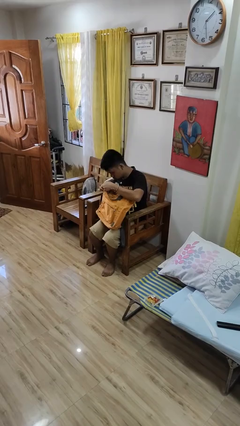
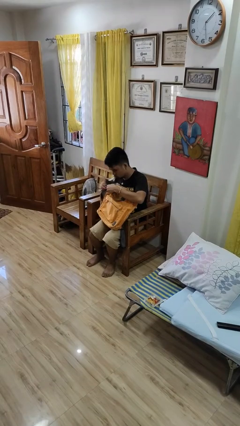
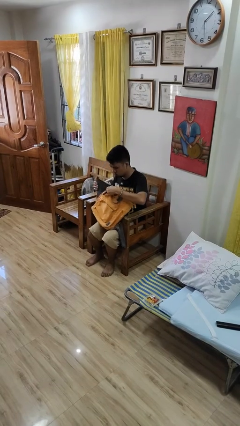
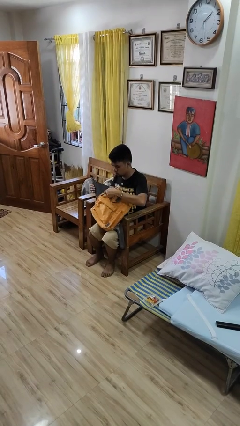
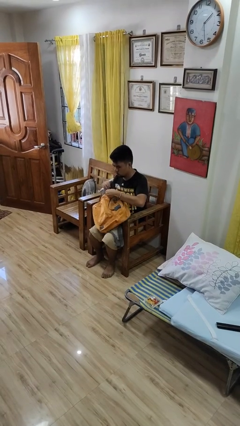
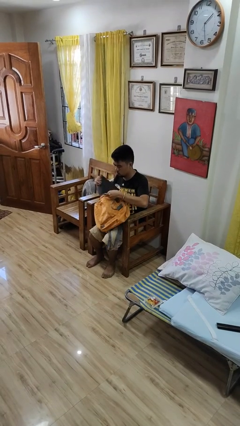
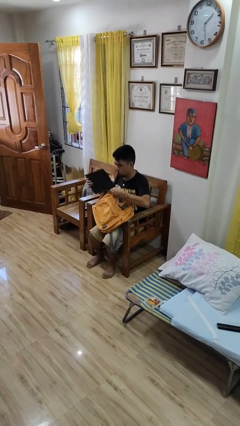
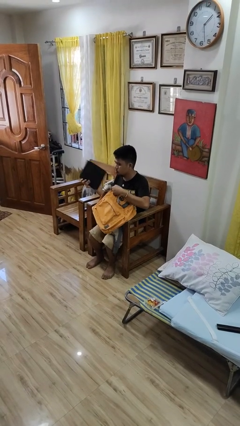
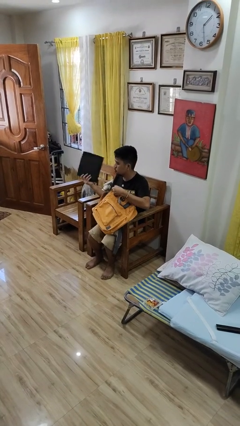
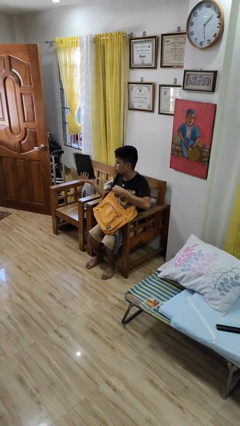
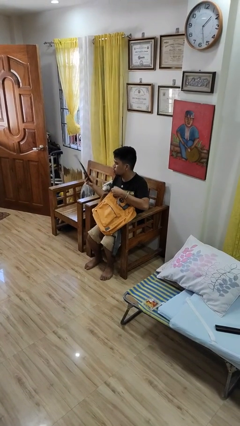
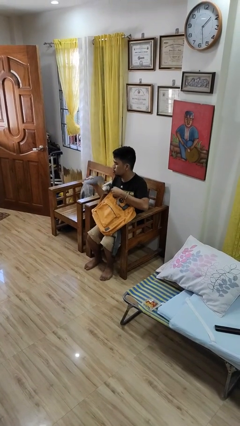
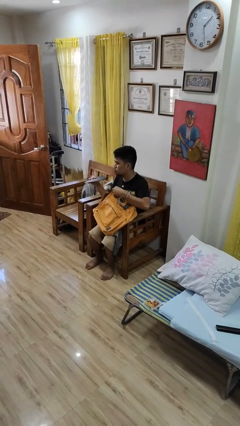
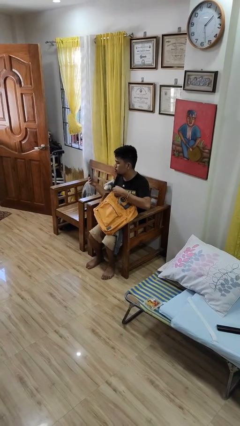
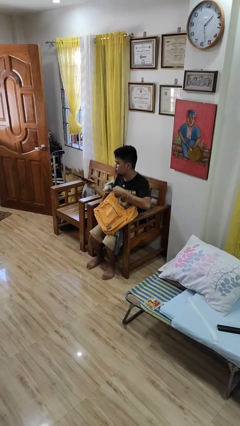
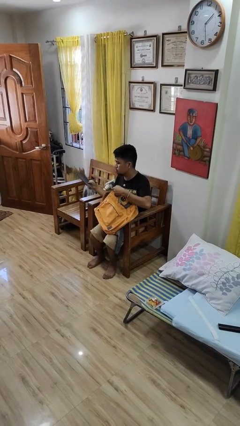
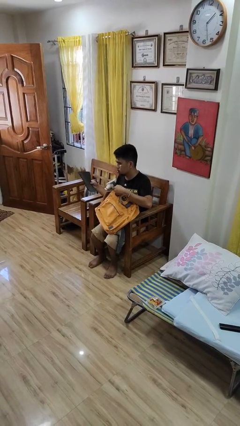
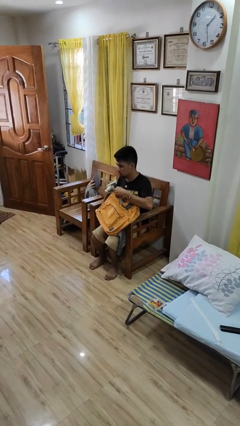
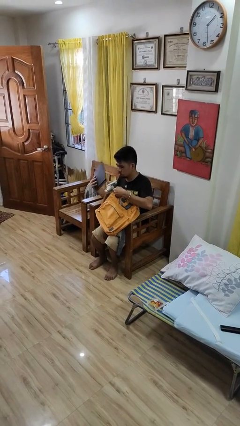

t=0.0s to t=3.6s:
person takes object from backpack

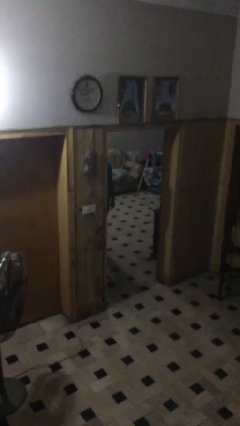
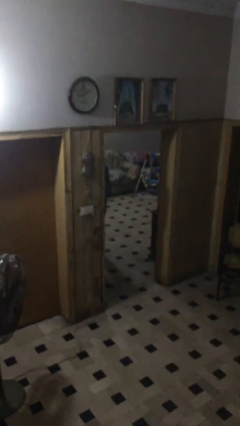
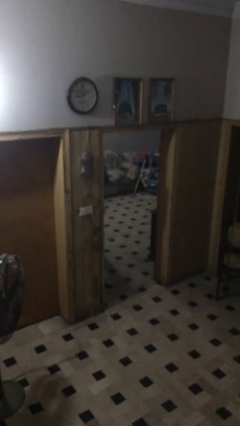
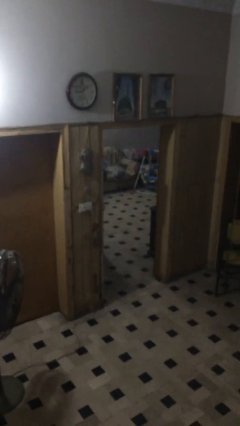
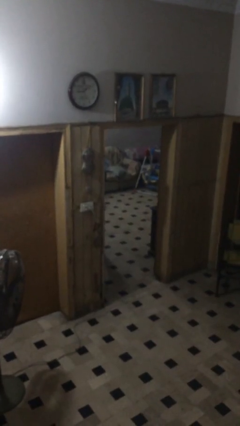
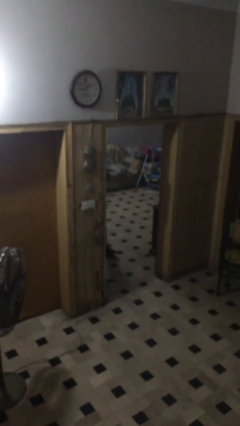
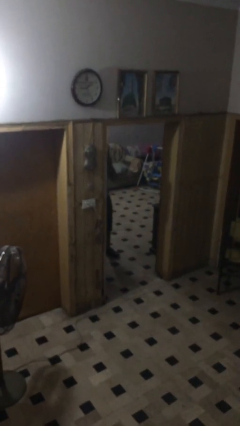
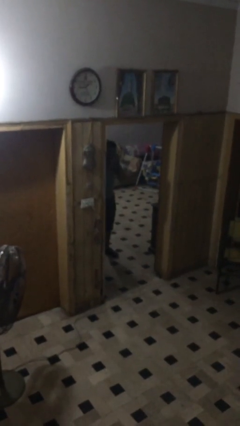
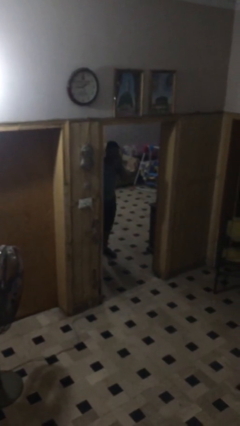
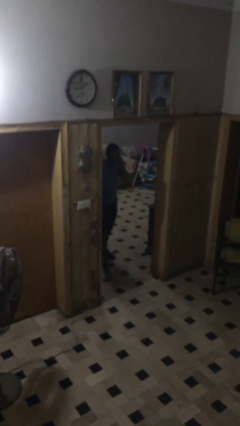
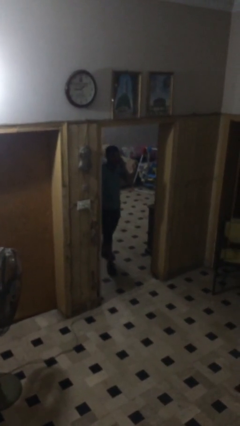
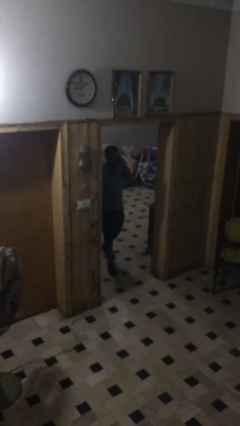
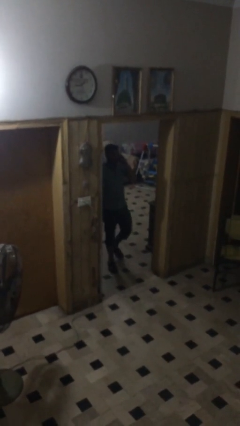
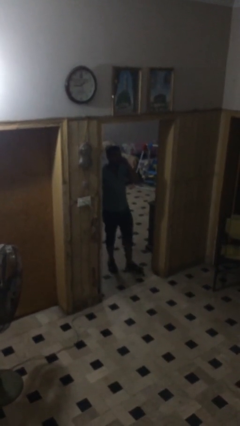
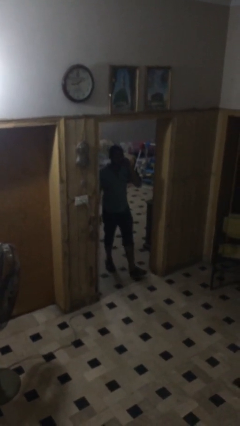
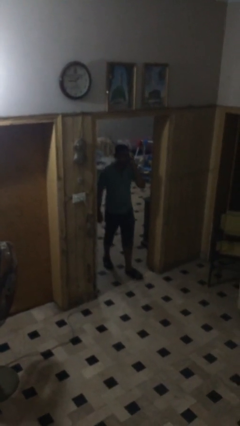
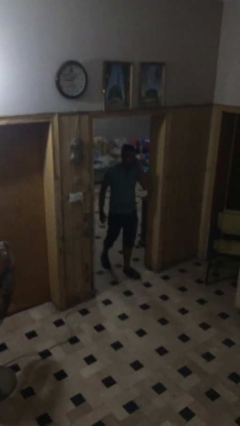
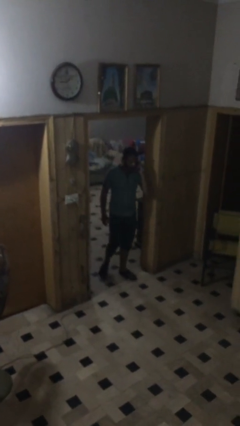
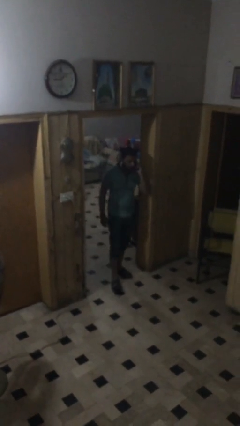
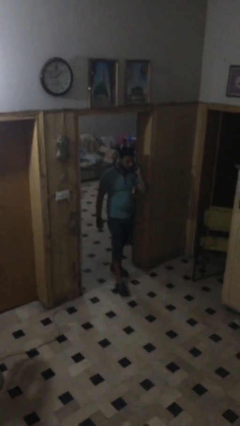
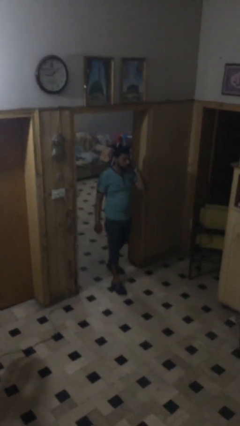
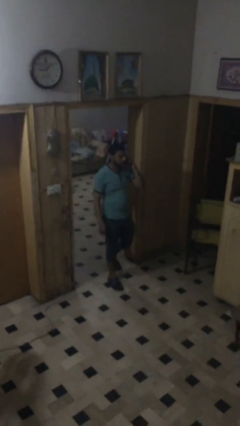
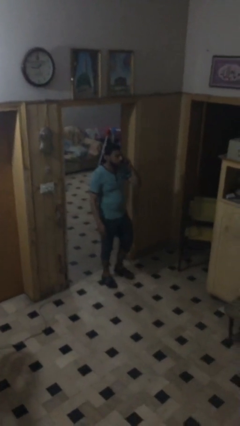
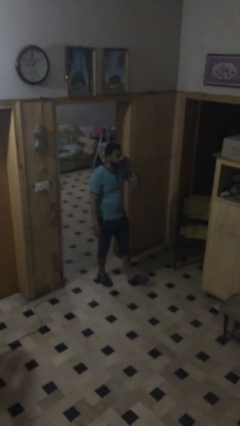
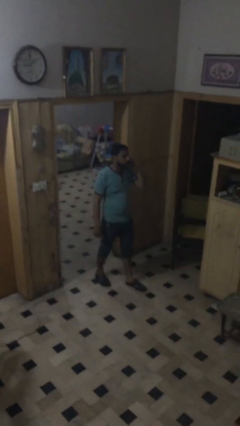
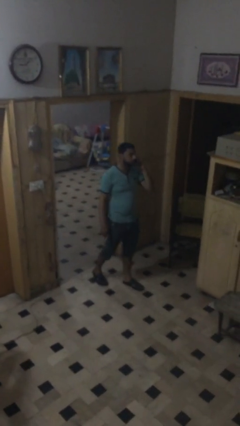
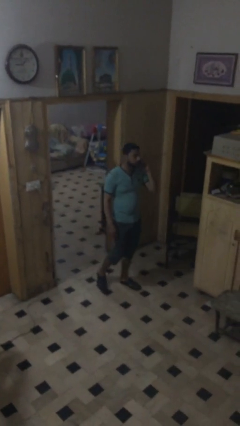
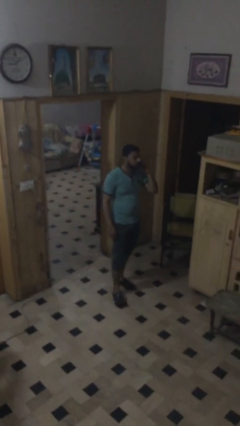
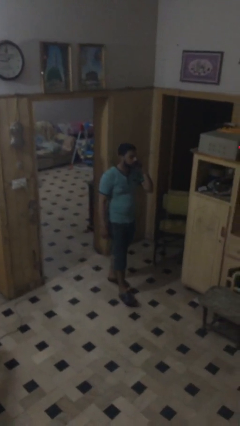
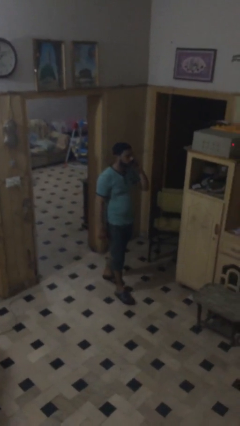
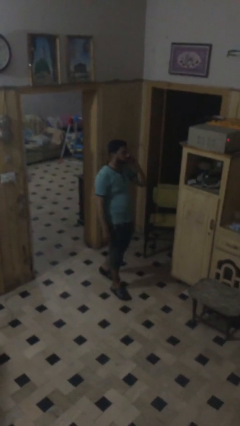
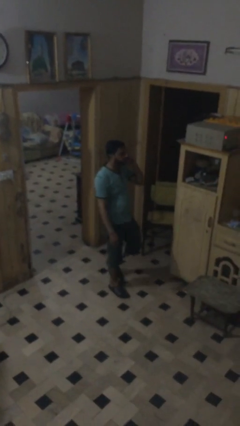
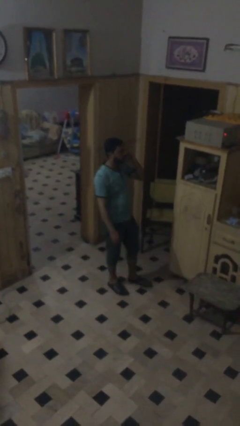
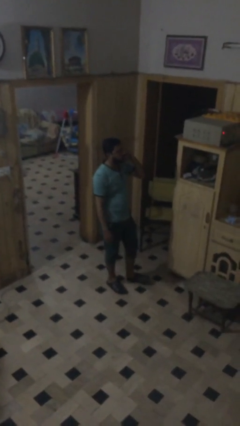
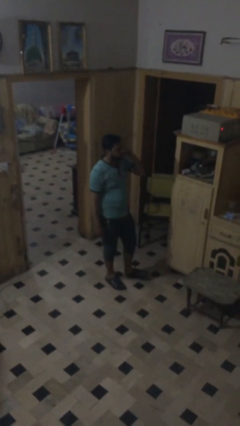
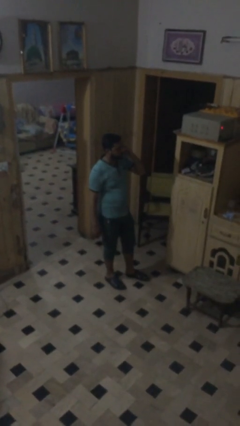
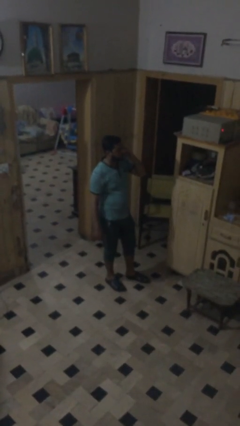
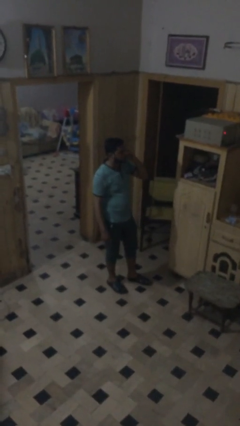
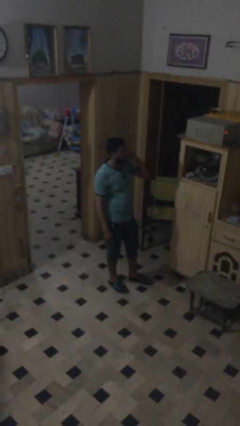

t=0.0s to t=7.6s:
person enters scene through structure

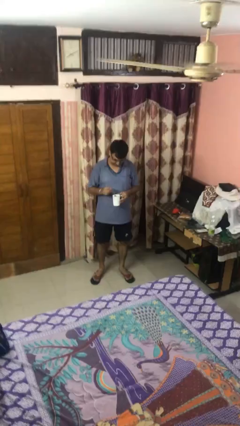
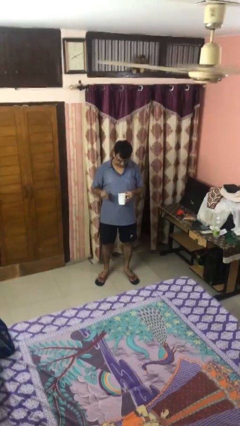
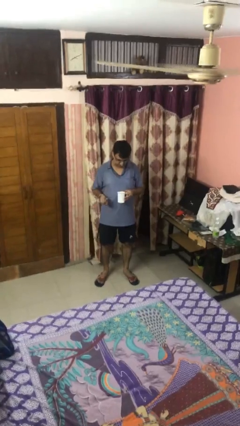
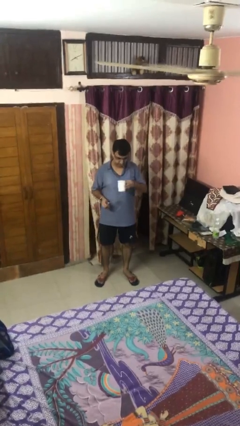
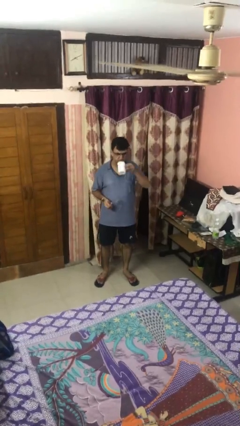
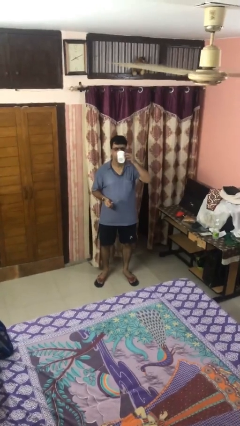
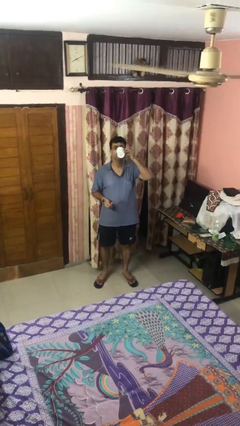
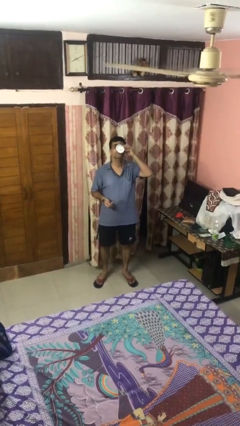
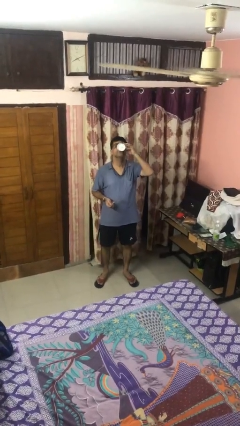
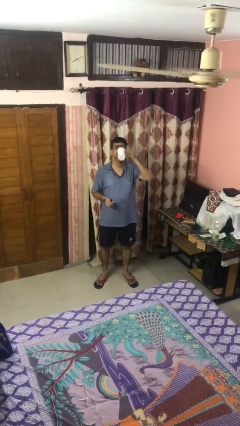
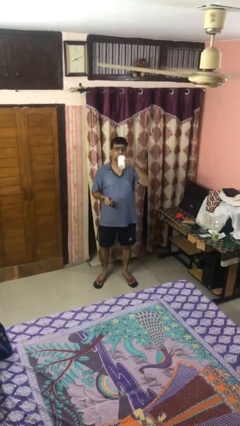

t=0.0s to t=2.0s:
person drinks from mug

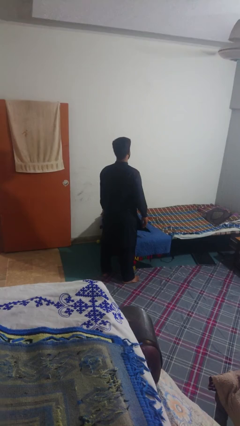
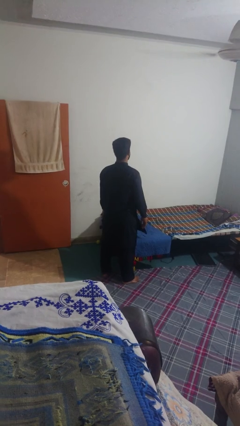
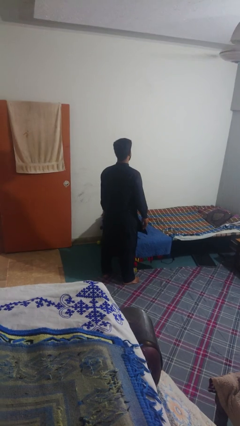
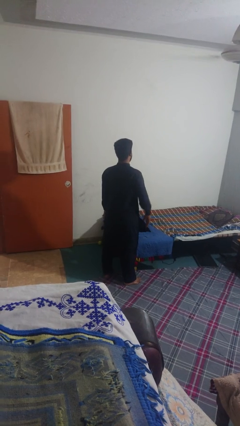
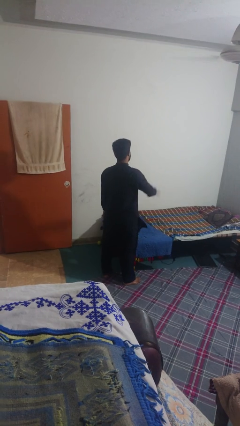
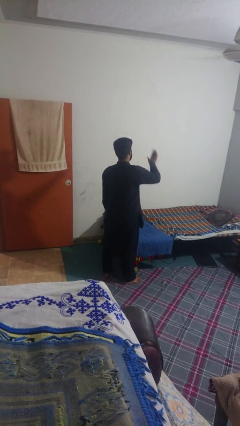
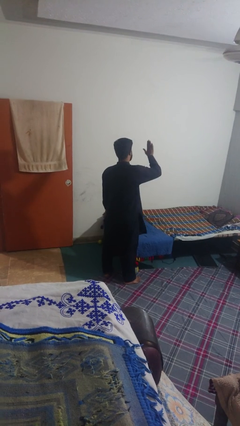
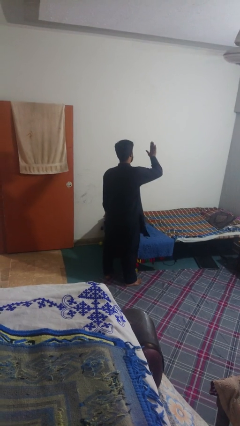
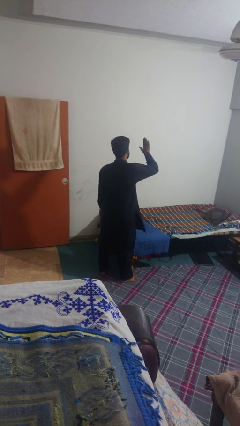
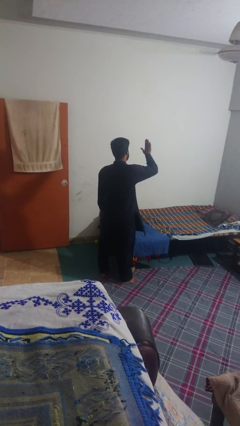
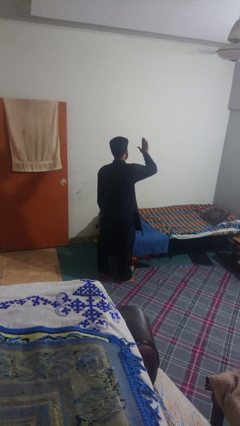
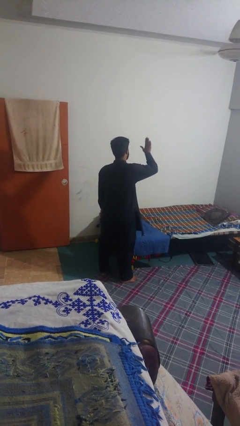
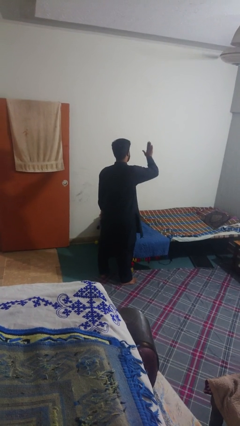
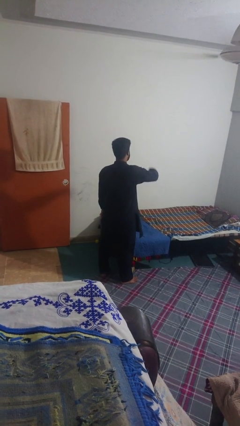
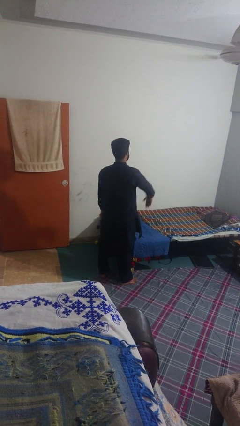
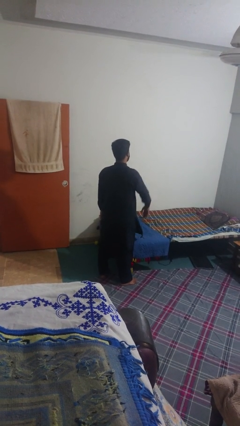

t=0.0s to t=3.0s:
person gestures stop

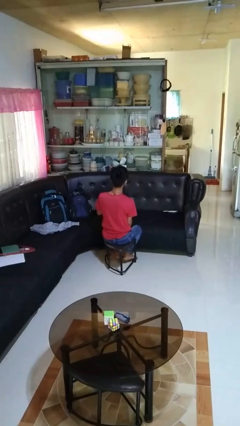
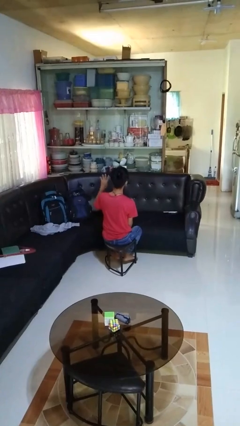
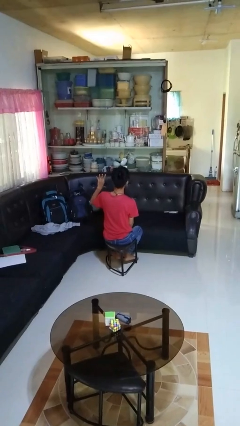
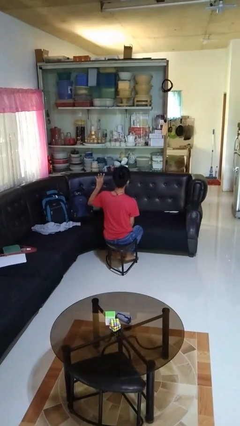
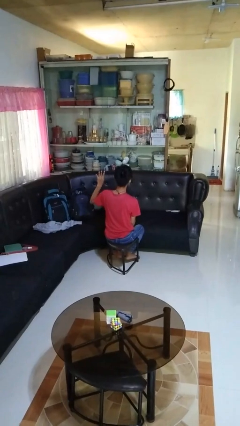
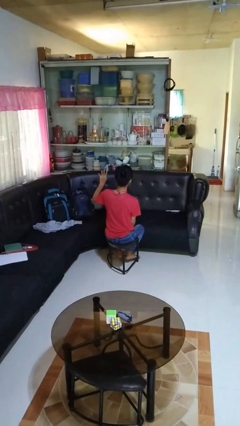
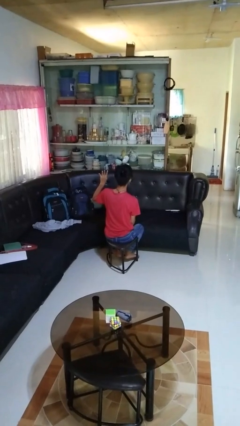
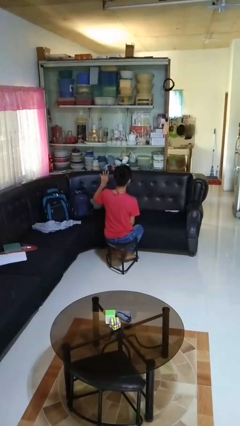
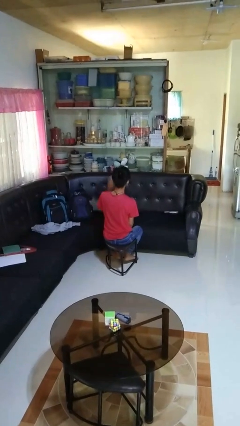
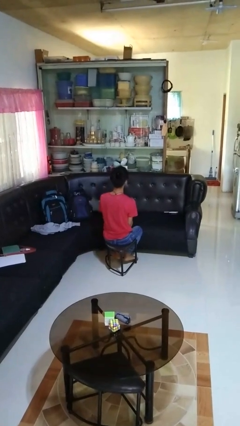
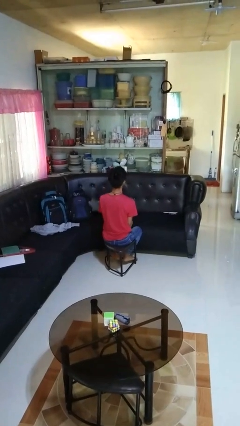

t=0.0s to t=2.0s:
person gestures number four
